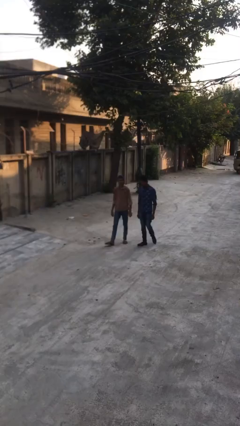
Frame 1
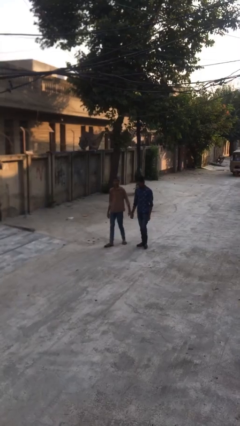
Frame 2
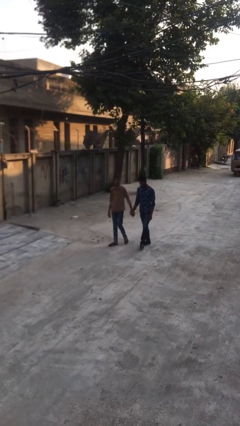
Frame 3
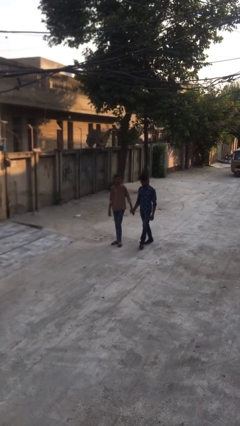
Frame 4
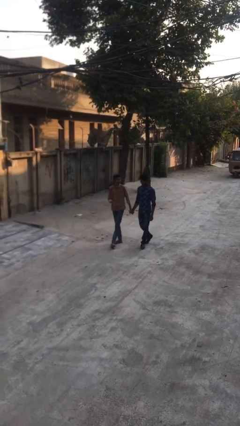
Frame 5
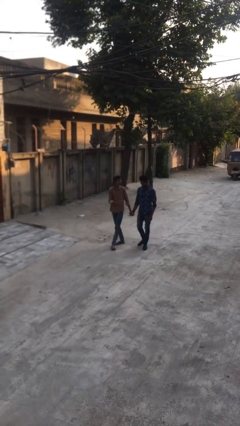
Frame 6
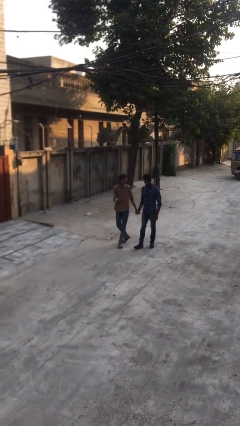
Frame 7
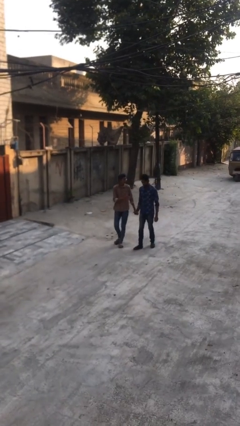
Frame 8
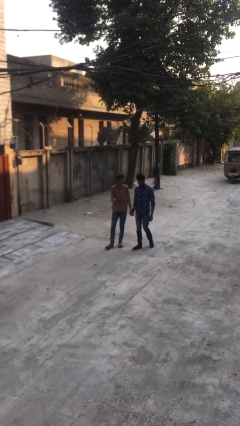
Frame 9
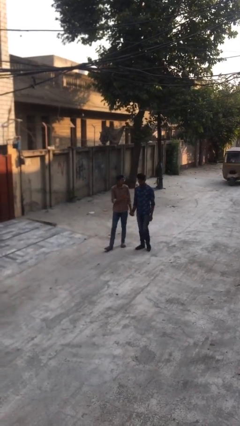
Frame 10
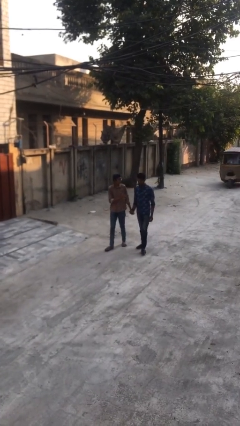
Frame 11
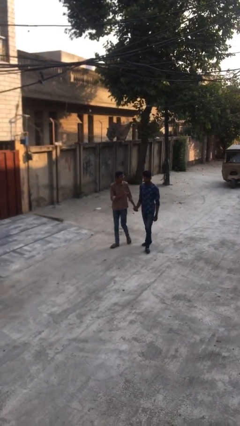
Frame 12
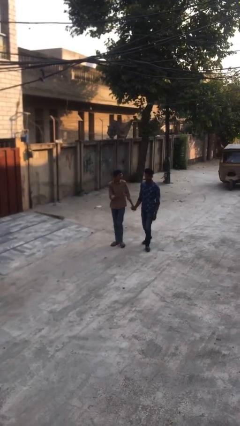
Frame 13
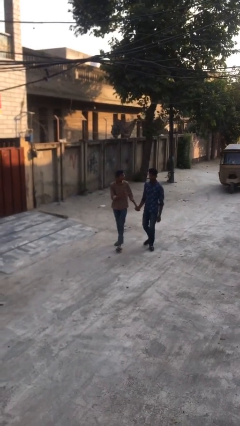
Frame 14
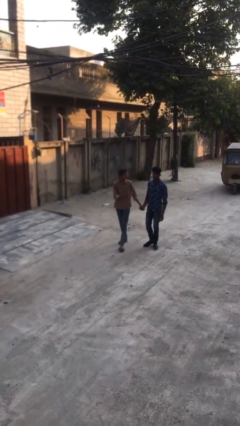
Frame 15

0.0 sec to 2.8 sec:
person holds hand

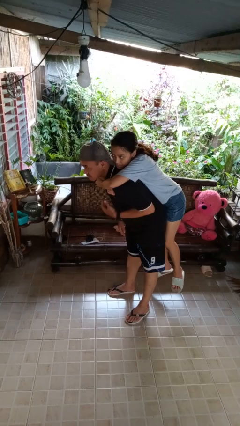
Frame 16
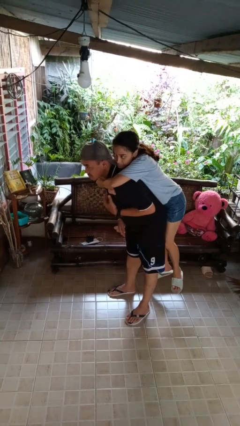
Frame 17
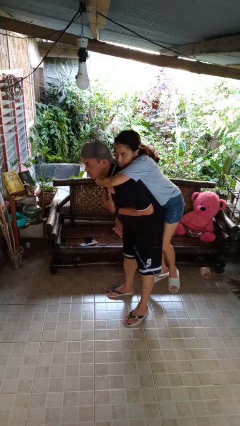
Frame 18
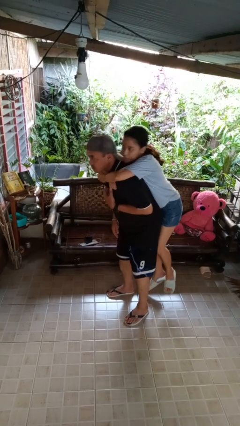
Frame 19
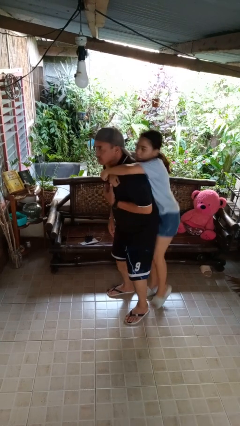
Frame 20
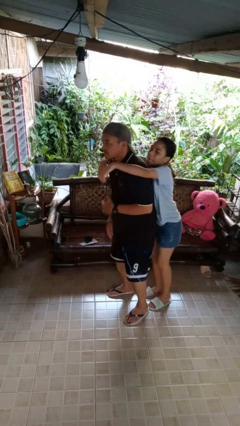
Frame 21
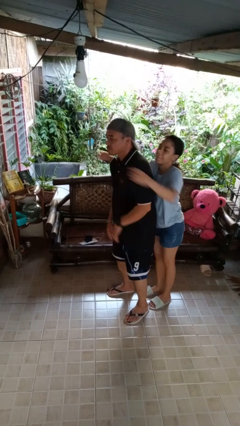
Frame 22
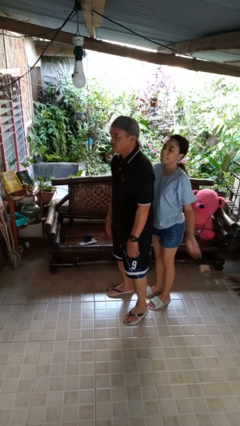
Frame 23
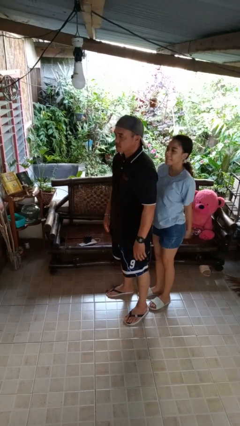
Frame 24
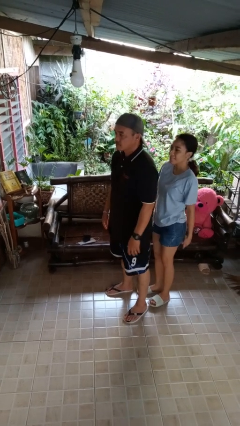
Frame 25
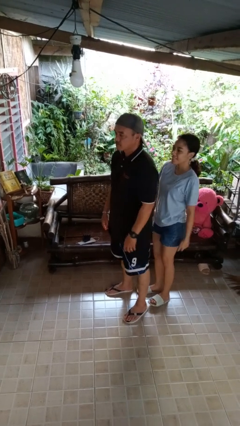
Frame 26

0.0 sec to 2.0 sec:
person puts down person

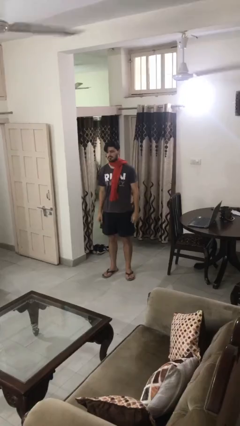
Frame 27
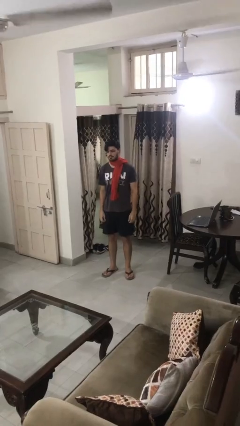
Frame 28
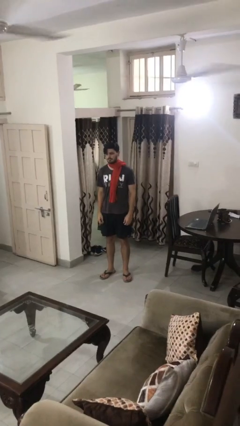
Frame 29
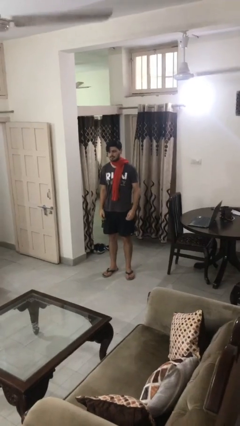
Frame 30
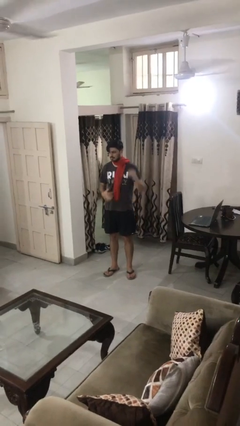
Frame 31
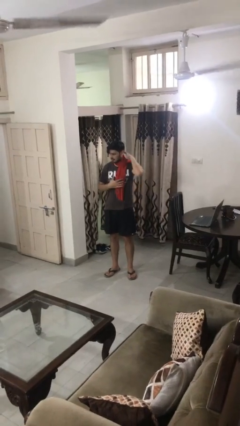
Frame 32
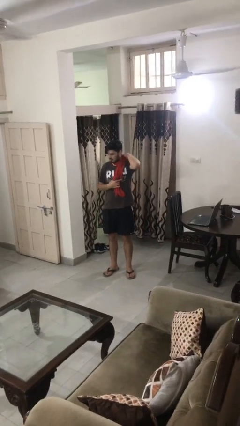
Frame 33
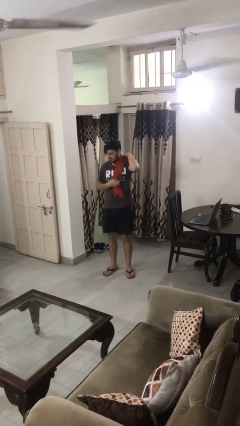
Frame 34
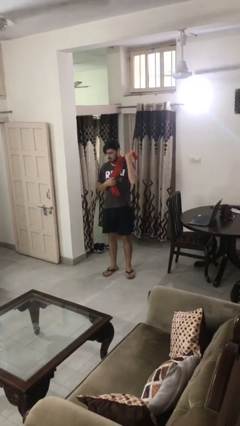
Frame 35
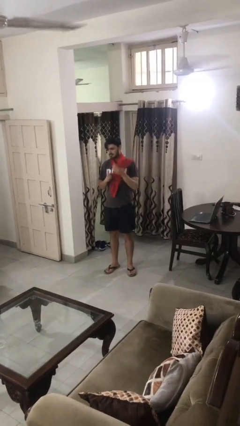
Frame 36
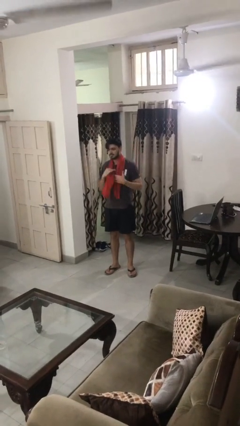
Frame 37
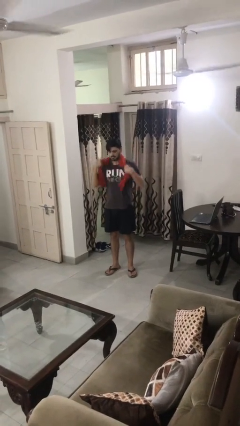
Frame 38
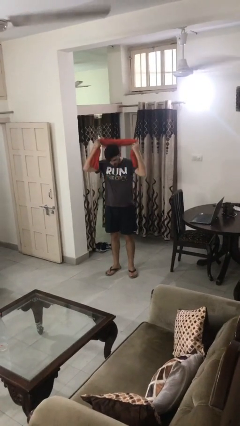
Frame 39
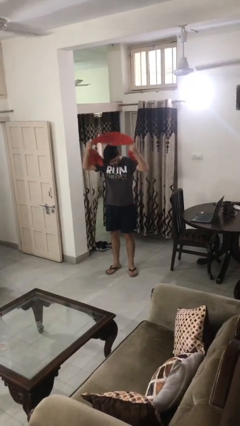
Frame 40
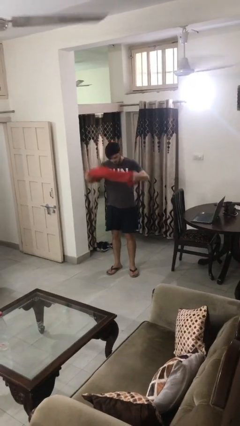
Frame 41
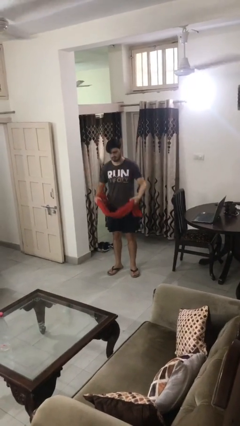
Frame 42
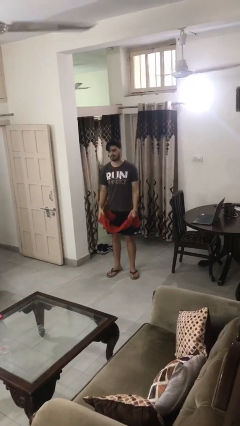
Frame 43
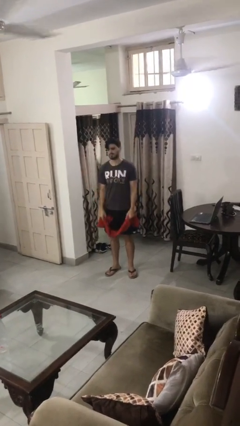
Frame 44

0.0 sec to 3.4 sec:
person takes off scarf

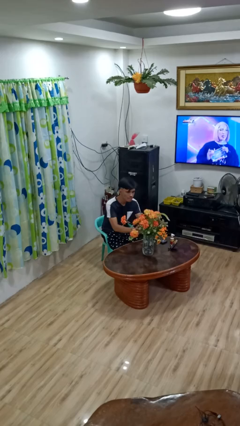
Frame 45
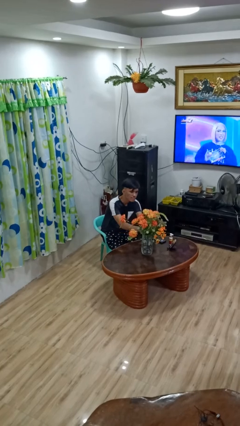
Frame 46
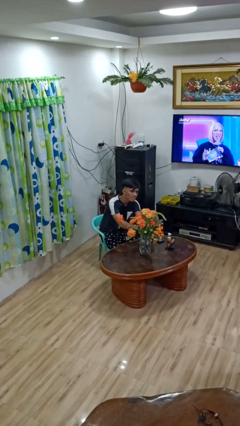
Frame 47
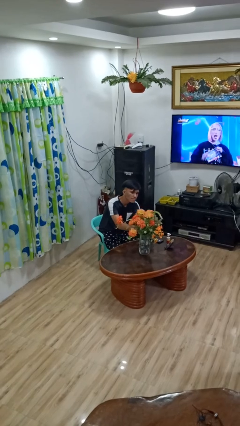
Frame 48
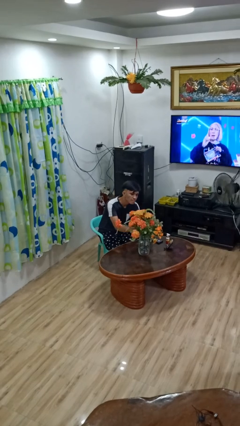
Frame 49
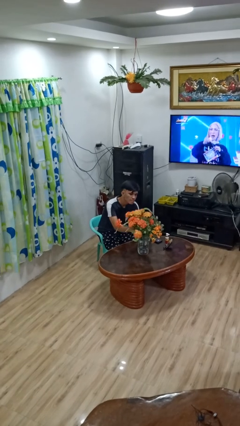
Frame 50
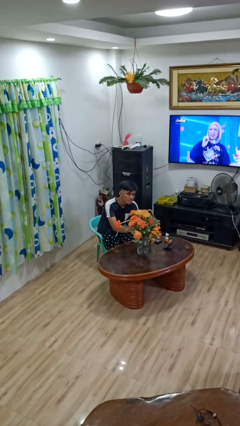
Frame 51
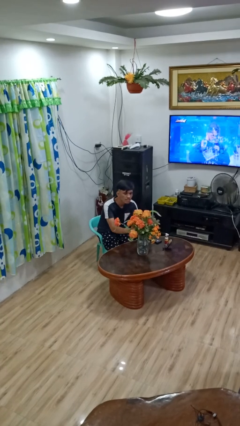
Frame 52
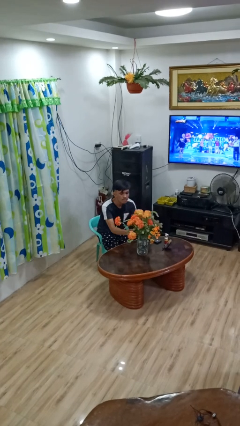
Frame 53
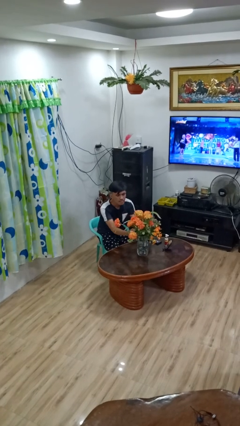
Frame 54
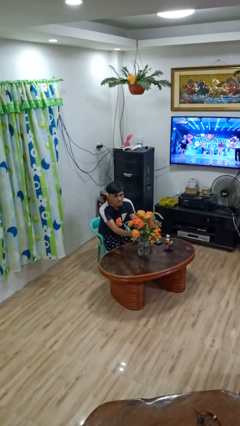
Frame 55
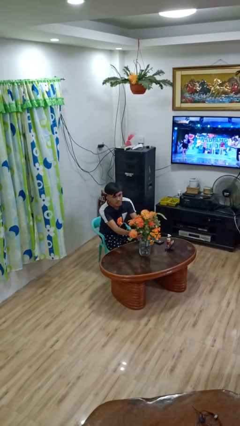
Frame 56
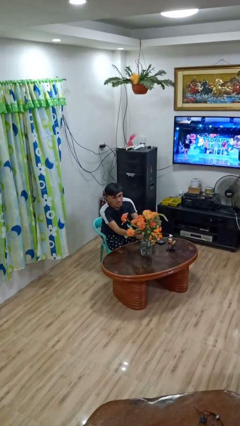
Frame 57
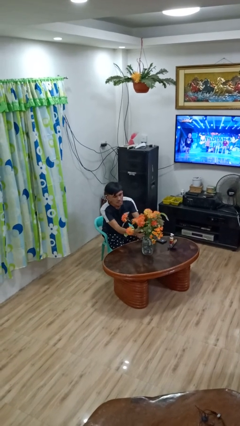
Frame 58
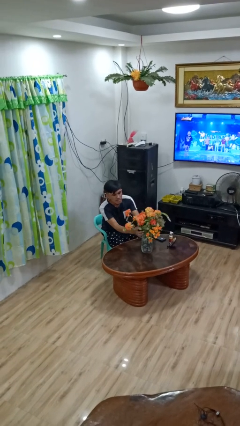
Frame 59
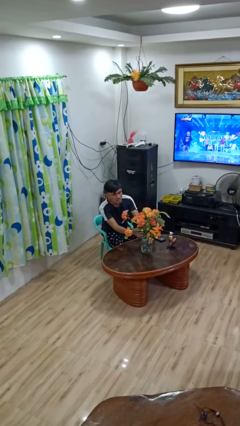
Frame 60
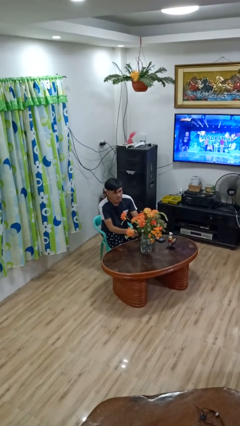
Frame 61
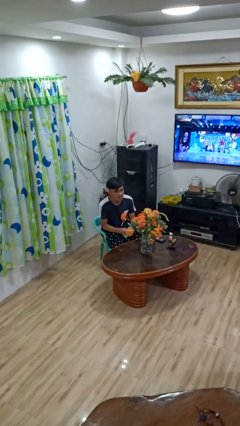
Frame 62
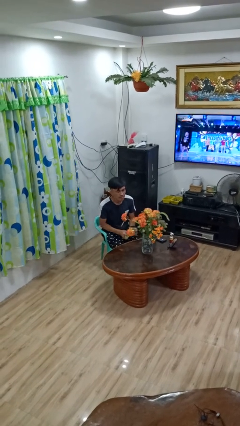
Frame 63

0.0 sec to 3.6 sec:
person arranges flowers in vase

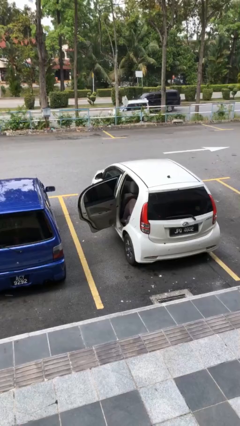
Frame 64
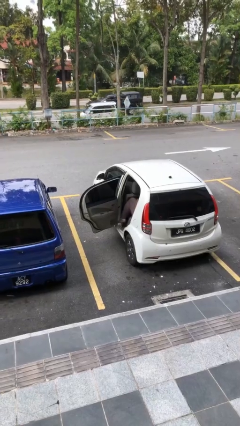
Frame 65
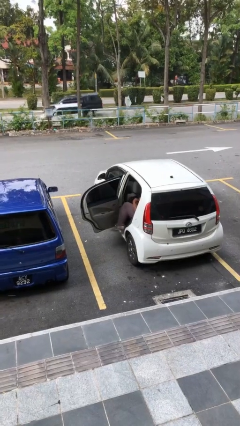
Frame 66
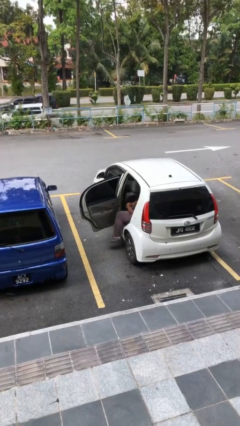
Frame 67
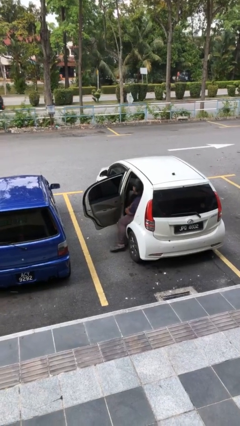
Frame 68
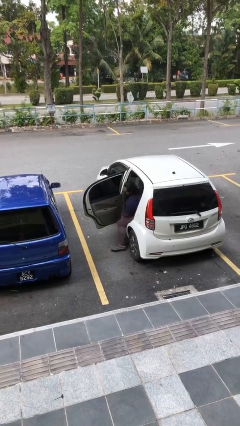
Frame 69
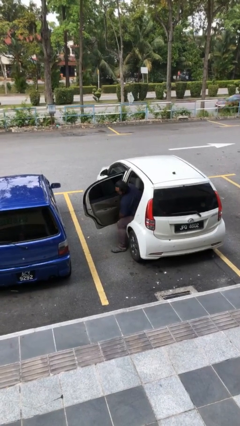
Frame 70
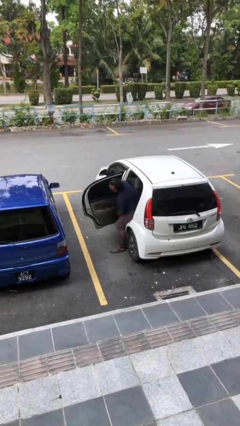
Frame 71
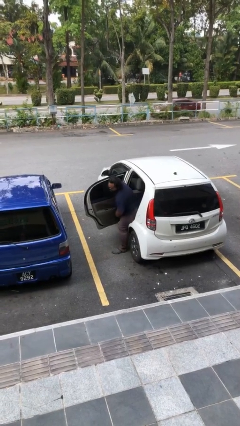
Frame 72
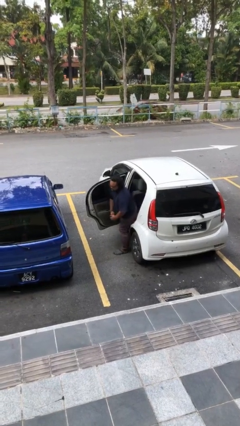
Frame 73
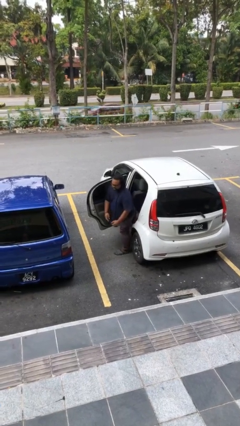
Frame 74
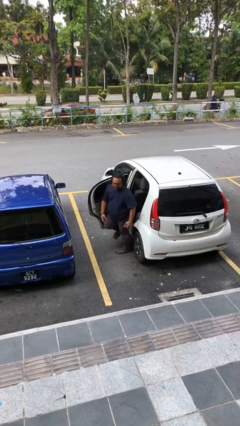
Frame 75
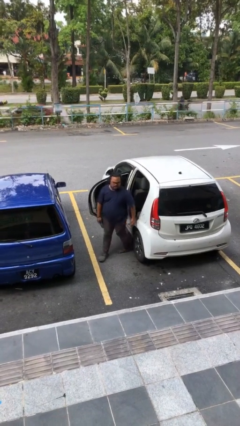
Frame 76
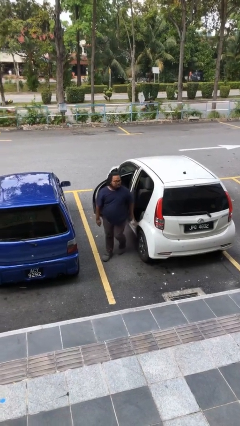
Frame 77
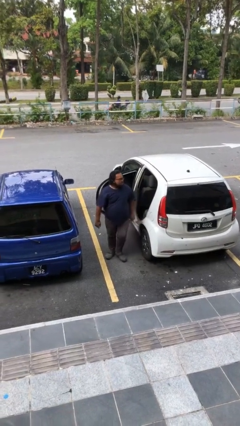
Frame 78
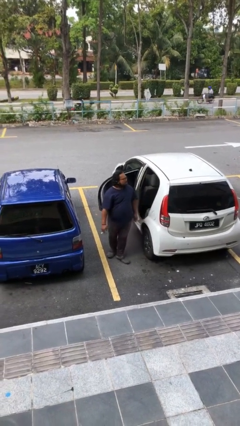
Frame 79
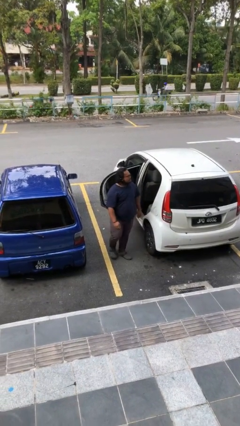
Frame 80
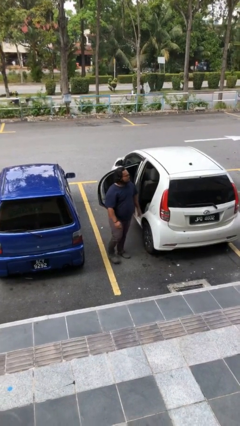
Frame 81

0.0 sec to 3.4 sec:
person exits car

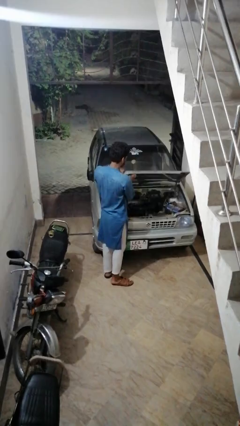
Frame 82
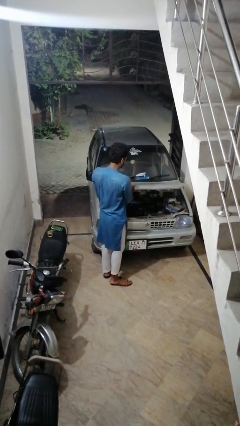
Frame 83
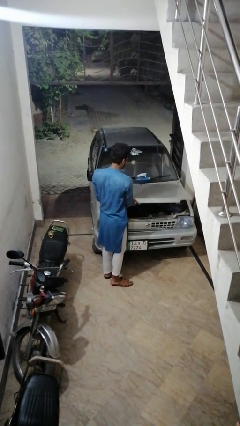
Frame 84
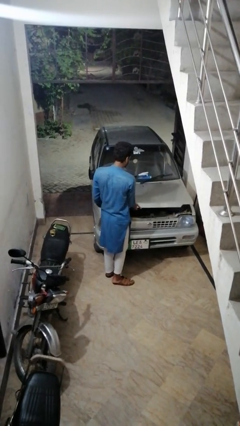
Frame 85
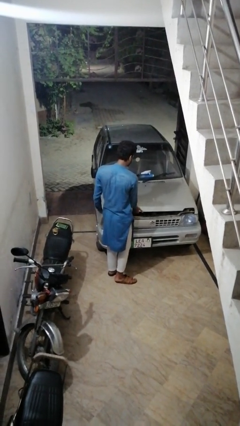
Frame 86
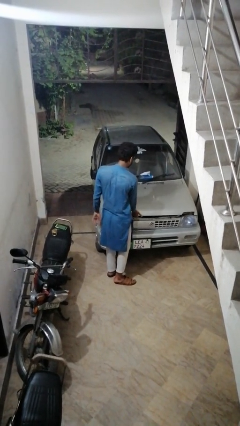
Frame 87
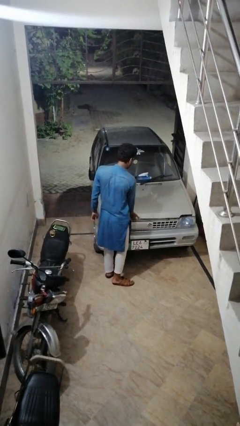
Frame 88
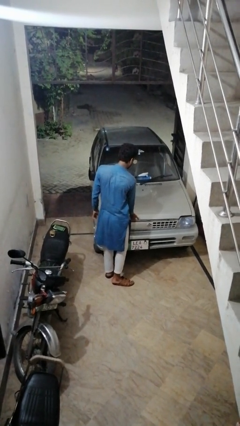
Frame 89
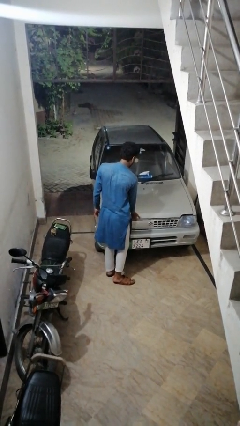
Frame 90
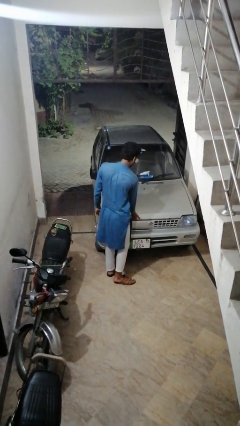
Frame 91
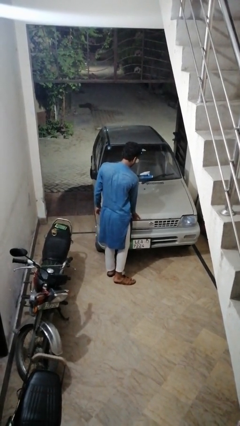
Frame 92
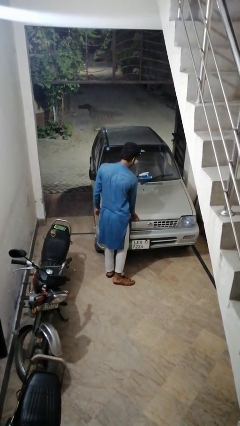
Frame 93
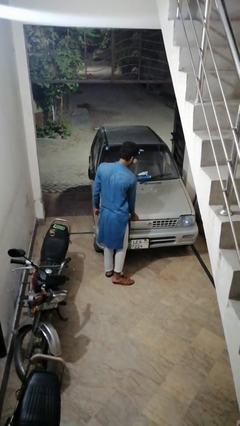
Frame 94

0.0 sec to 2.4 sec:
person closes car hood
